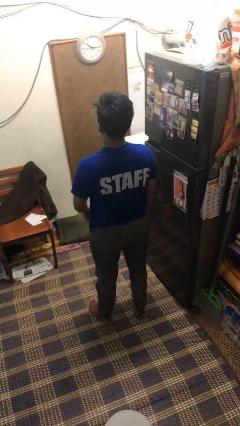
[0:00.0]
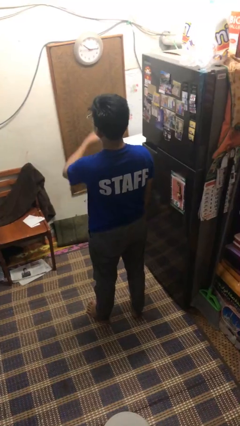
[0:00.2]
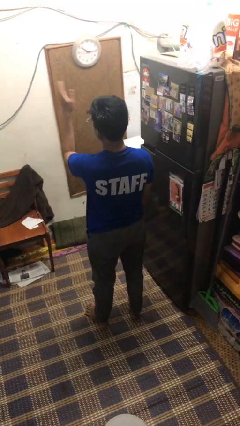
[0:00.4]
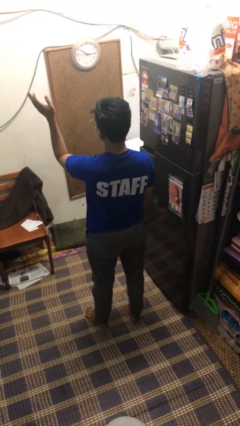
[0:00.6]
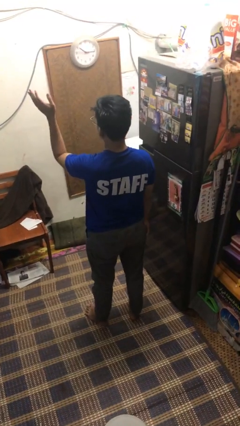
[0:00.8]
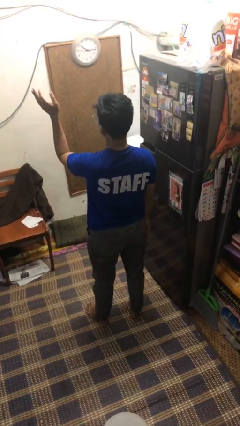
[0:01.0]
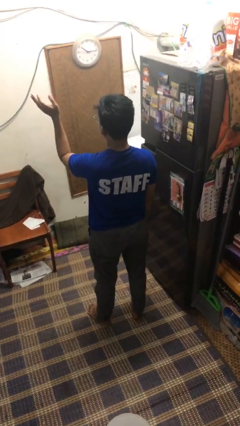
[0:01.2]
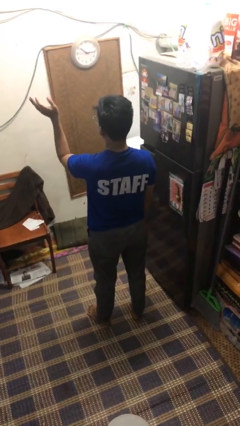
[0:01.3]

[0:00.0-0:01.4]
person gestures swipe left

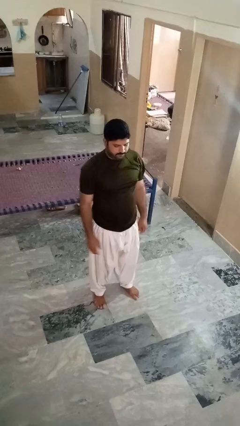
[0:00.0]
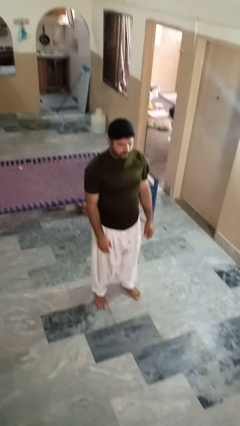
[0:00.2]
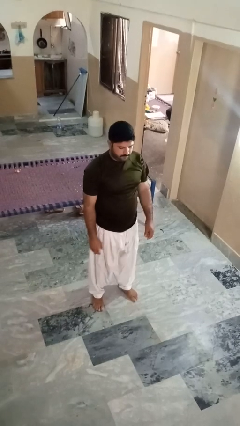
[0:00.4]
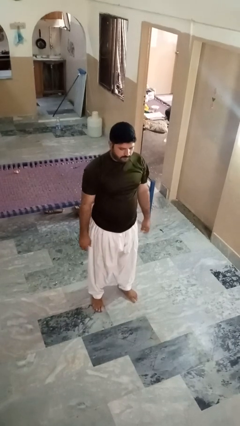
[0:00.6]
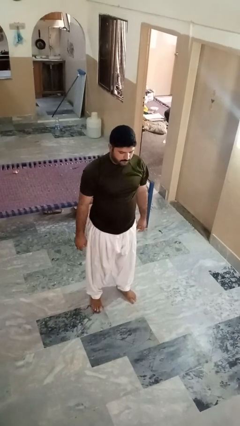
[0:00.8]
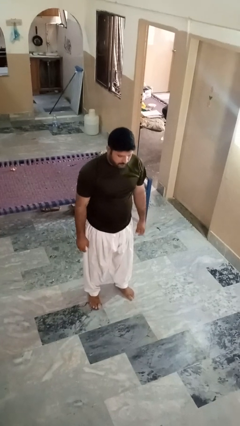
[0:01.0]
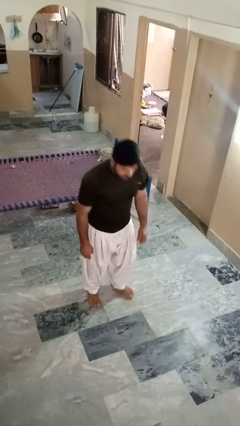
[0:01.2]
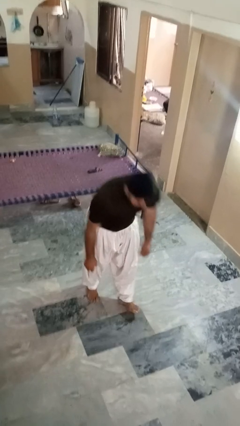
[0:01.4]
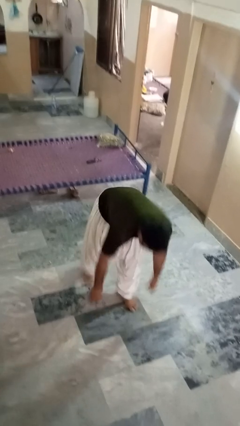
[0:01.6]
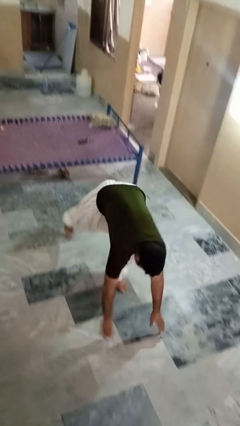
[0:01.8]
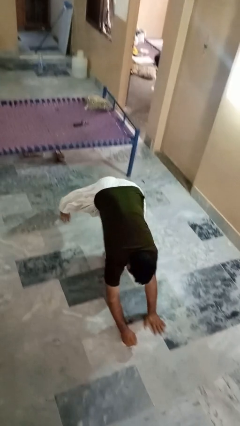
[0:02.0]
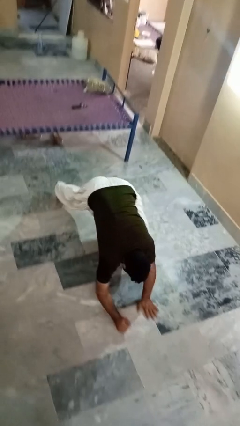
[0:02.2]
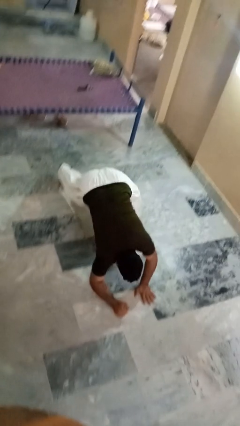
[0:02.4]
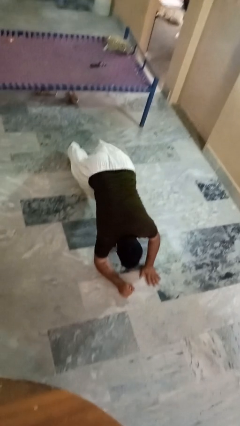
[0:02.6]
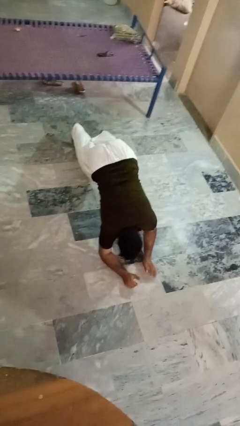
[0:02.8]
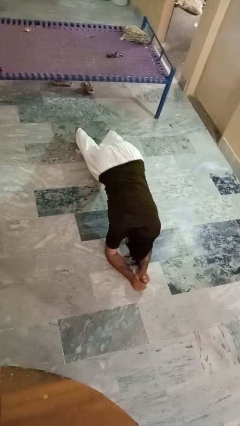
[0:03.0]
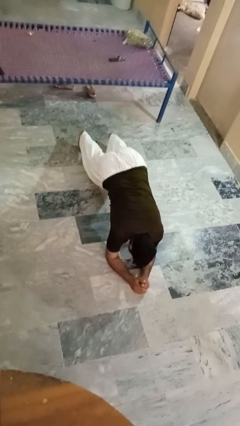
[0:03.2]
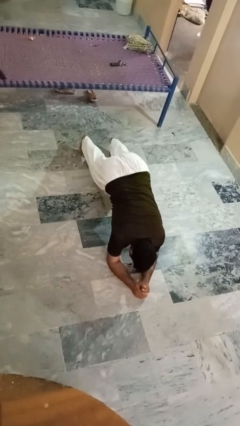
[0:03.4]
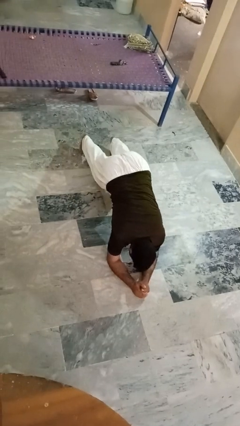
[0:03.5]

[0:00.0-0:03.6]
person exercises with plank

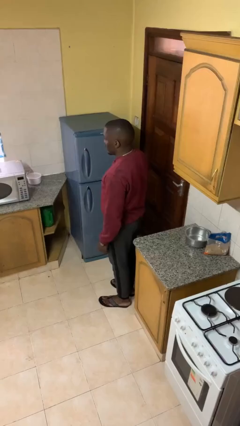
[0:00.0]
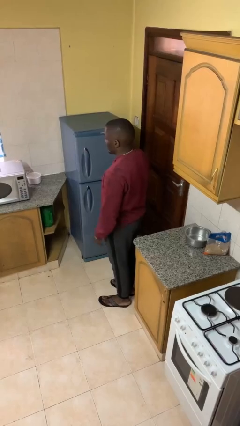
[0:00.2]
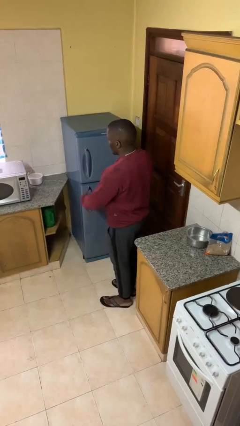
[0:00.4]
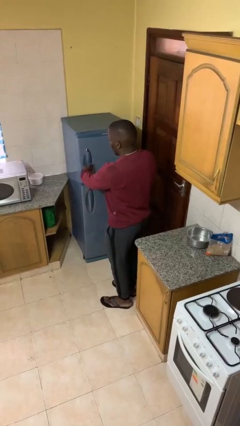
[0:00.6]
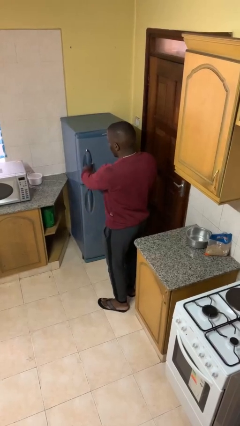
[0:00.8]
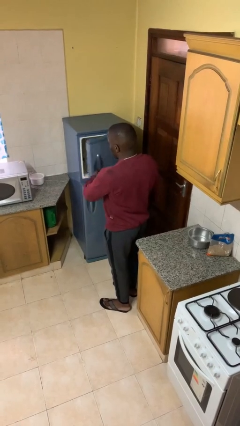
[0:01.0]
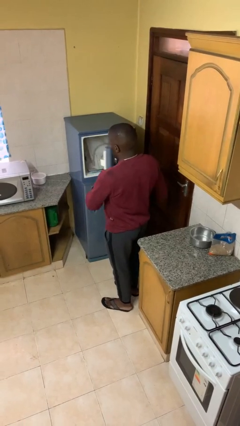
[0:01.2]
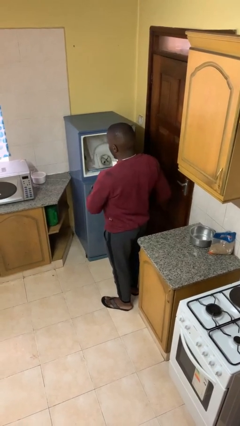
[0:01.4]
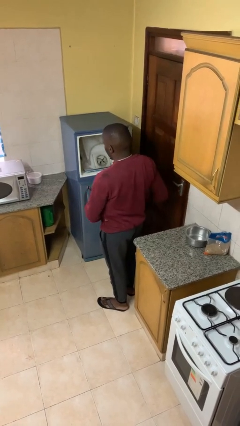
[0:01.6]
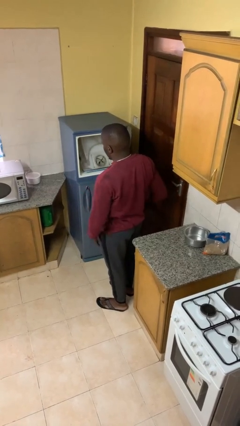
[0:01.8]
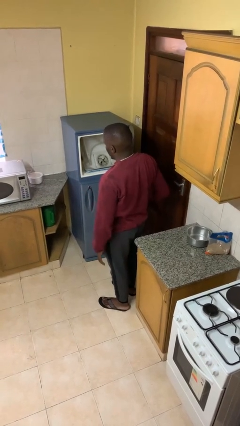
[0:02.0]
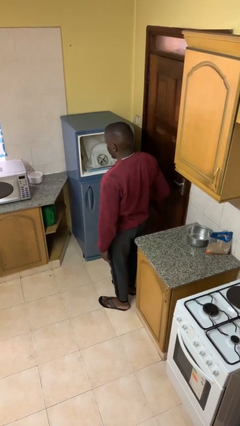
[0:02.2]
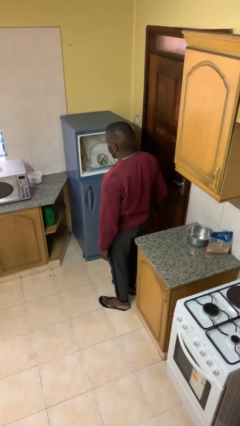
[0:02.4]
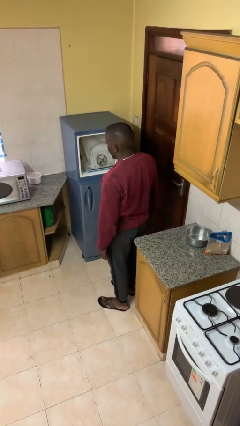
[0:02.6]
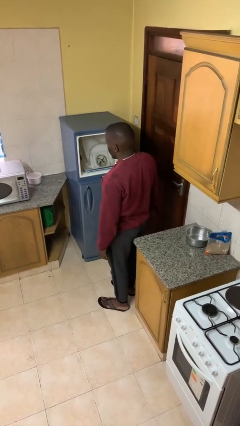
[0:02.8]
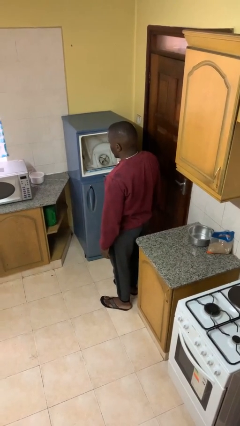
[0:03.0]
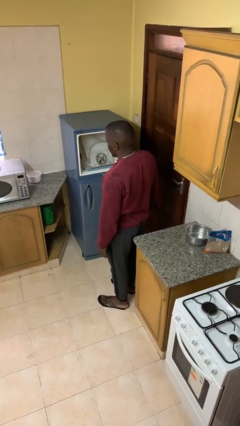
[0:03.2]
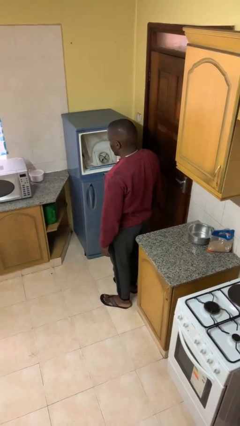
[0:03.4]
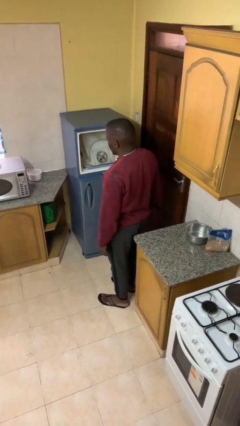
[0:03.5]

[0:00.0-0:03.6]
person opens refrigerator

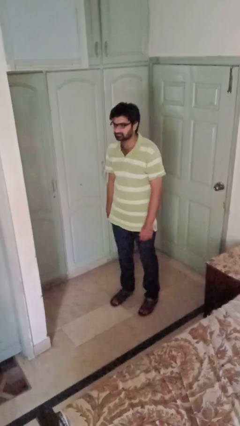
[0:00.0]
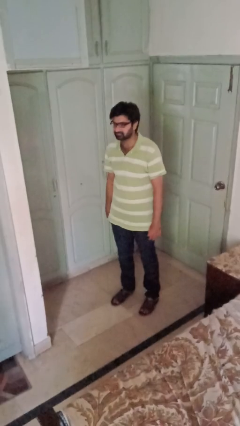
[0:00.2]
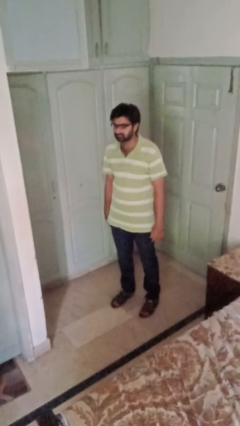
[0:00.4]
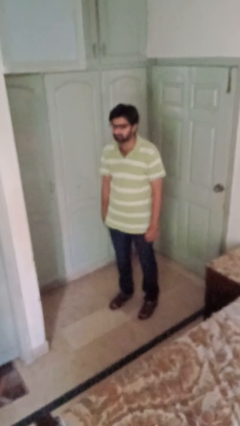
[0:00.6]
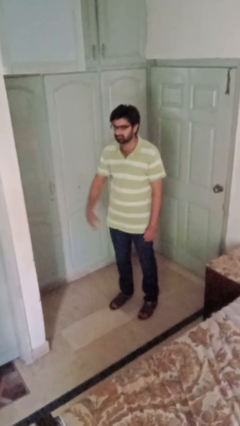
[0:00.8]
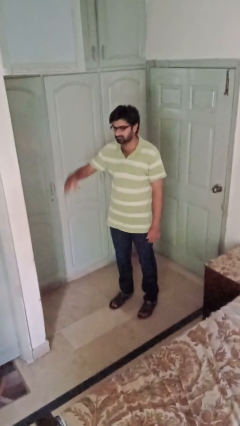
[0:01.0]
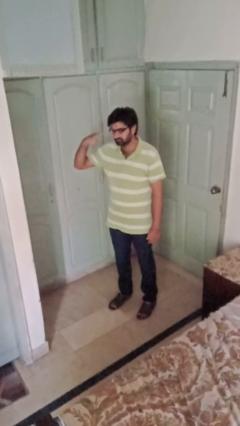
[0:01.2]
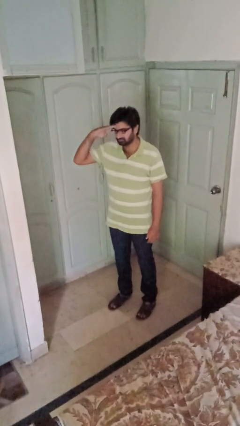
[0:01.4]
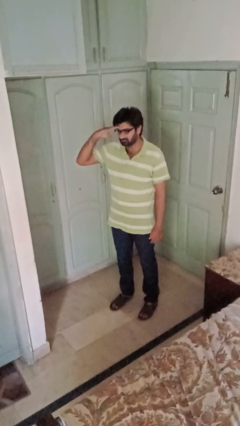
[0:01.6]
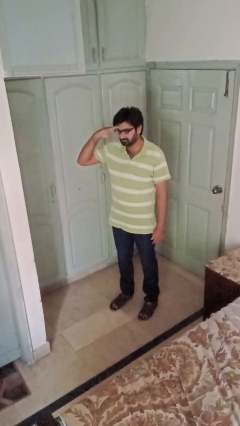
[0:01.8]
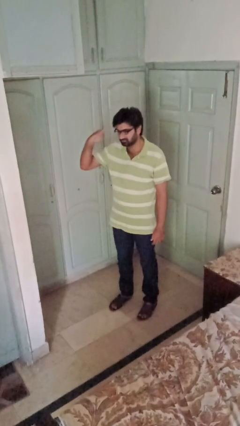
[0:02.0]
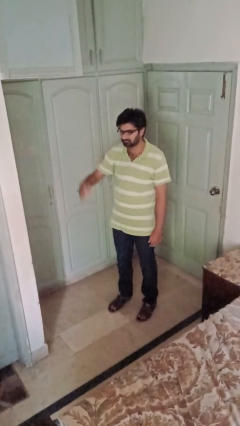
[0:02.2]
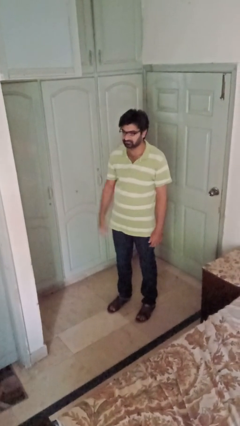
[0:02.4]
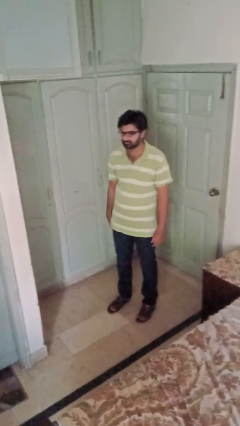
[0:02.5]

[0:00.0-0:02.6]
person salutes

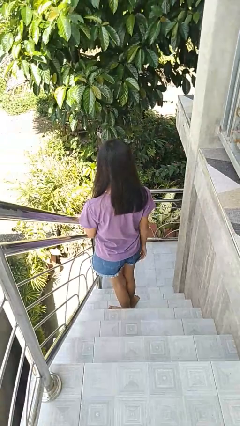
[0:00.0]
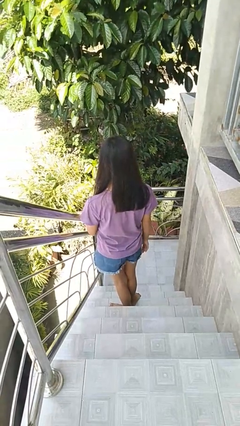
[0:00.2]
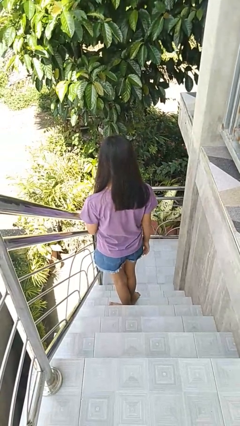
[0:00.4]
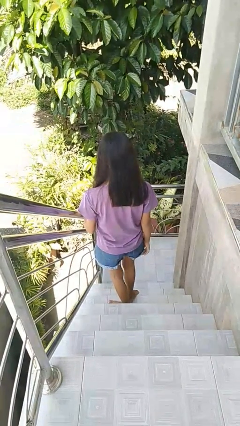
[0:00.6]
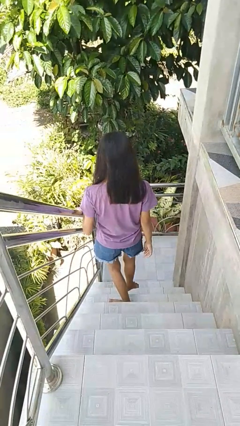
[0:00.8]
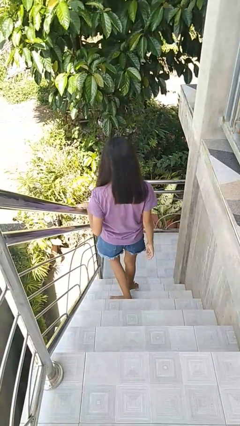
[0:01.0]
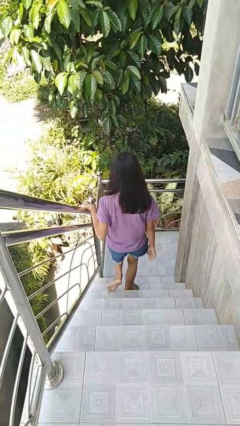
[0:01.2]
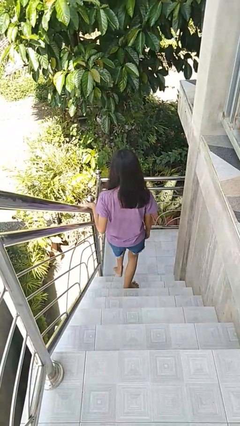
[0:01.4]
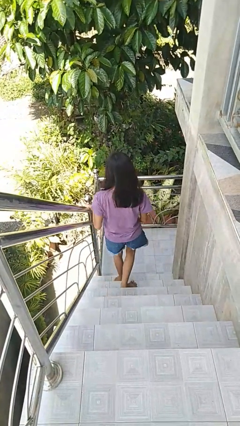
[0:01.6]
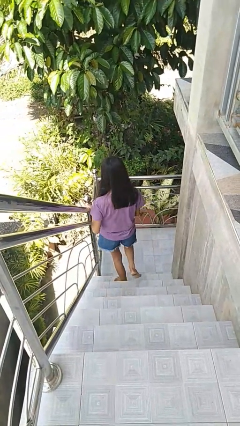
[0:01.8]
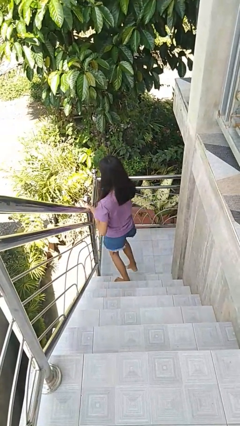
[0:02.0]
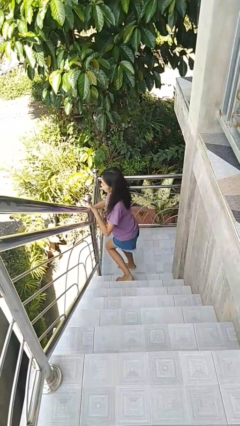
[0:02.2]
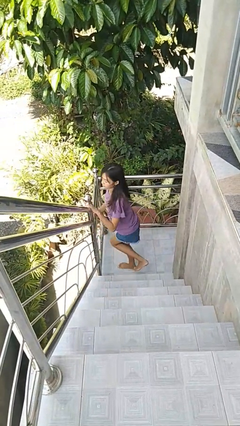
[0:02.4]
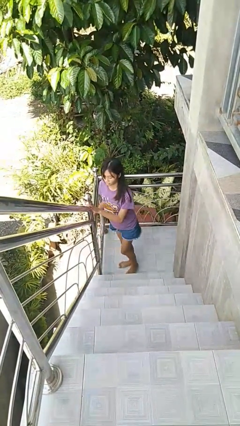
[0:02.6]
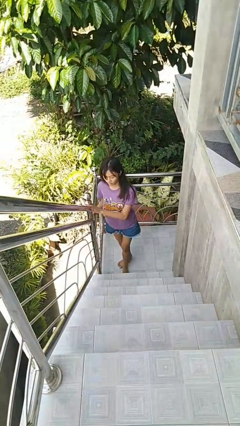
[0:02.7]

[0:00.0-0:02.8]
person climbs down stairs

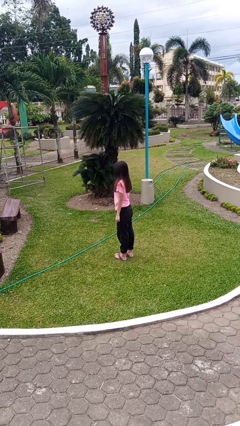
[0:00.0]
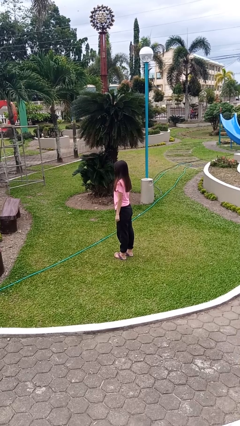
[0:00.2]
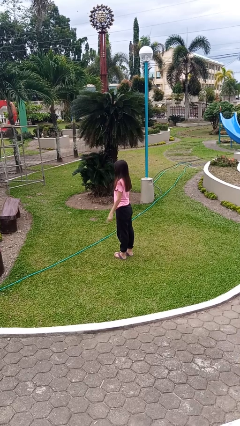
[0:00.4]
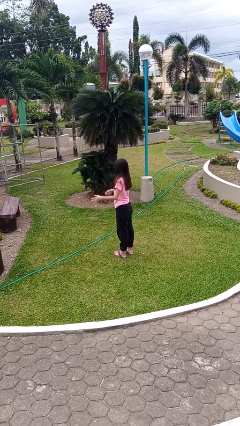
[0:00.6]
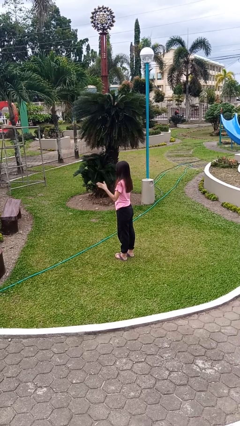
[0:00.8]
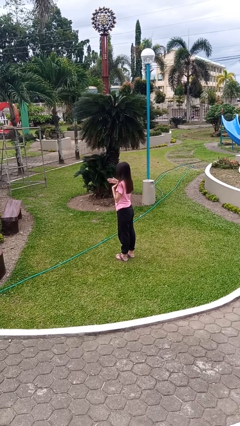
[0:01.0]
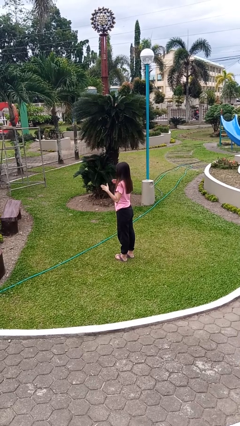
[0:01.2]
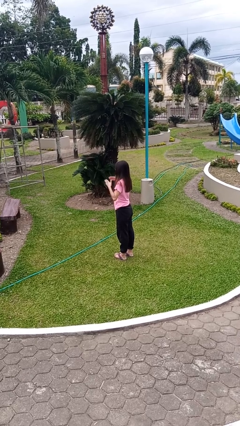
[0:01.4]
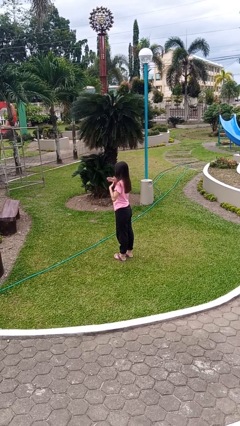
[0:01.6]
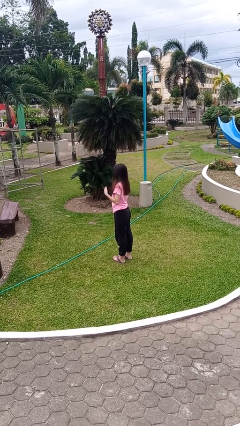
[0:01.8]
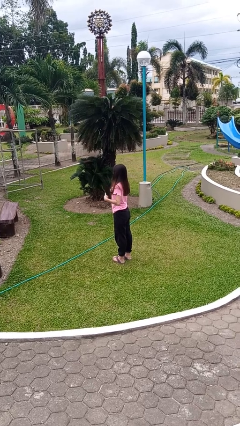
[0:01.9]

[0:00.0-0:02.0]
person drums on chest

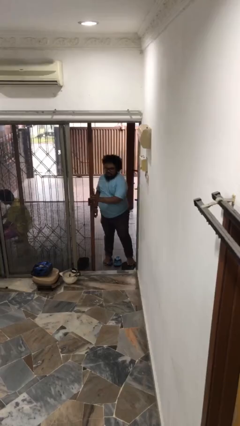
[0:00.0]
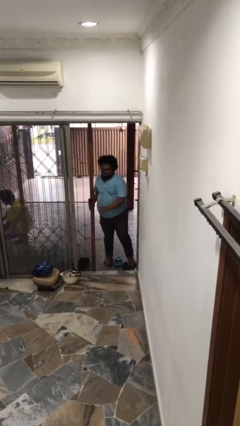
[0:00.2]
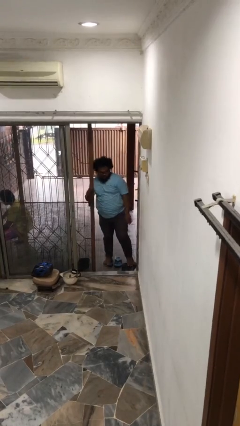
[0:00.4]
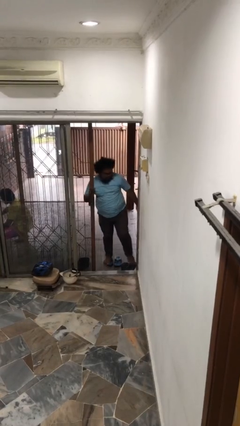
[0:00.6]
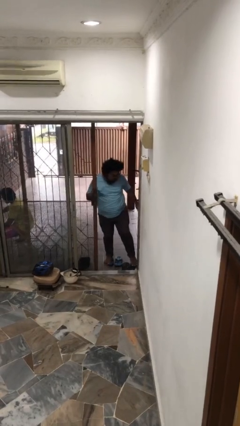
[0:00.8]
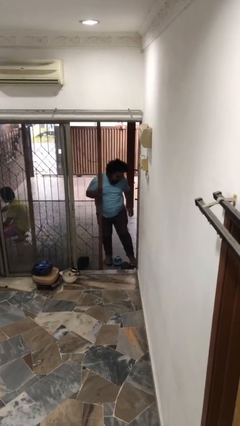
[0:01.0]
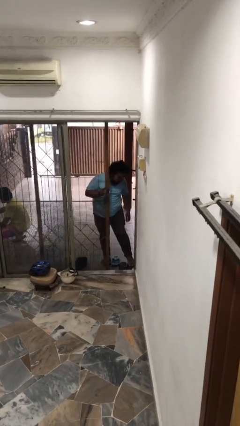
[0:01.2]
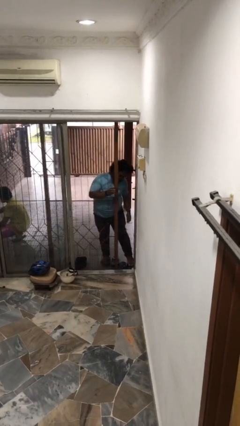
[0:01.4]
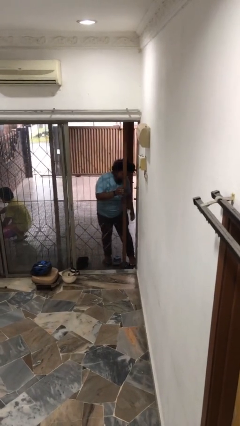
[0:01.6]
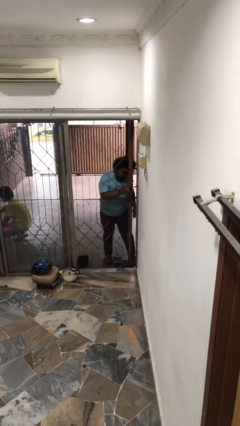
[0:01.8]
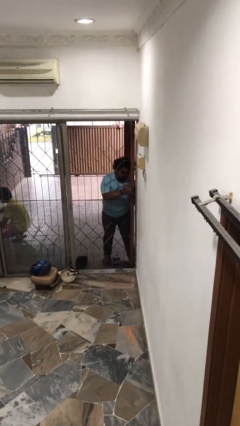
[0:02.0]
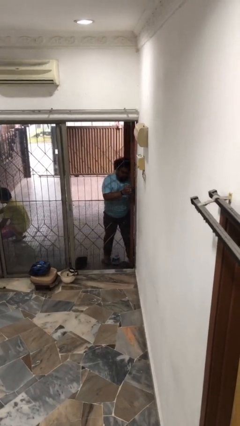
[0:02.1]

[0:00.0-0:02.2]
person closes facility door
